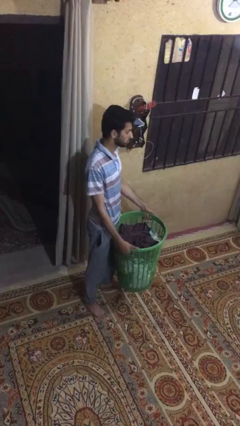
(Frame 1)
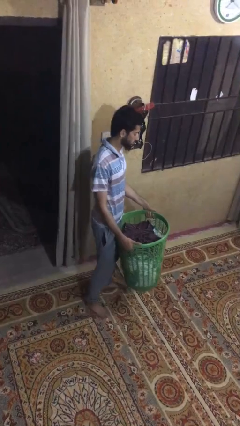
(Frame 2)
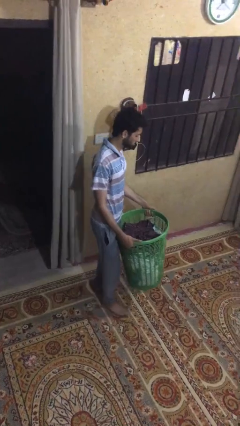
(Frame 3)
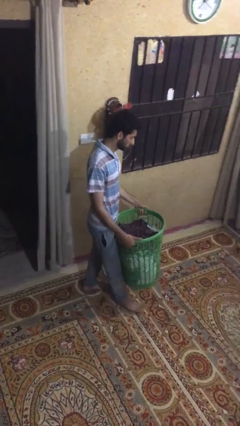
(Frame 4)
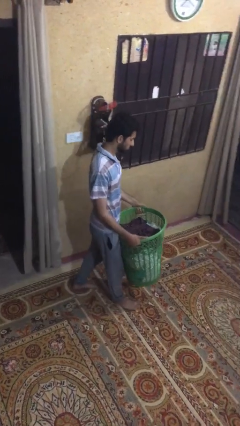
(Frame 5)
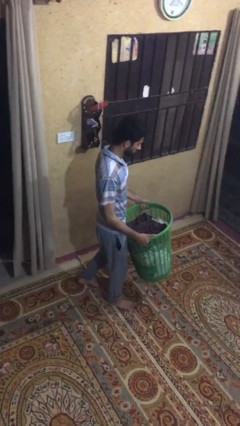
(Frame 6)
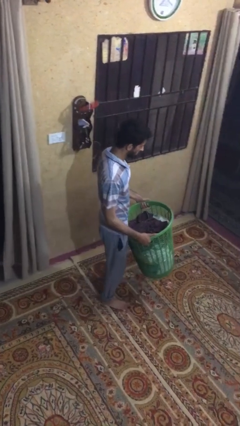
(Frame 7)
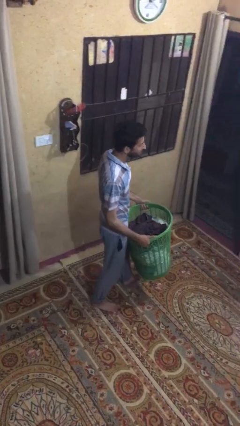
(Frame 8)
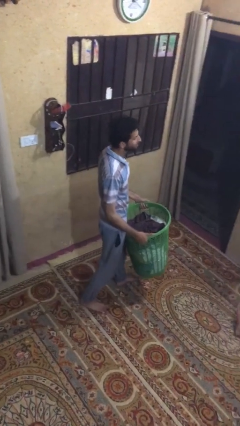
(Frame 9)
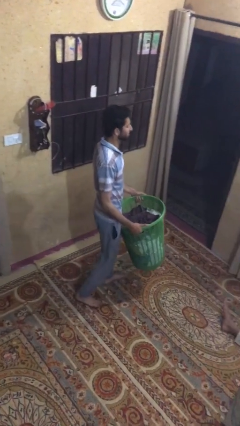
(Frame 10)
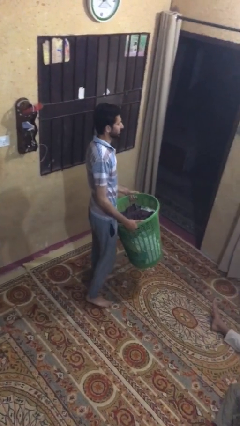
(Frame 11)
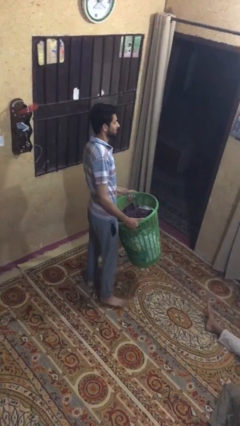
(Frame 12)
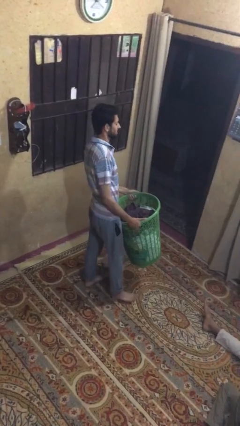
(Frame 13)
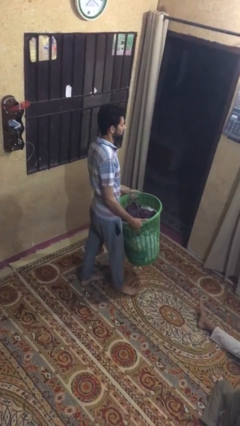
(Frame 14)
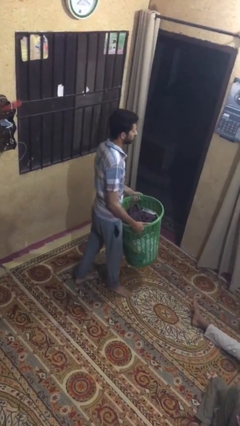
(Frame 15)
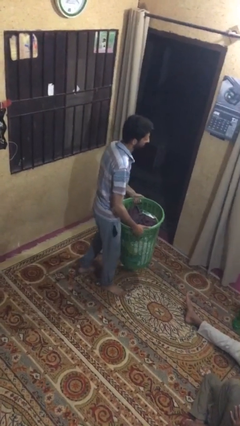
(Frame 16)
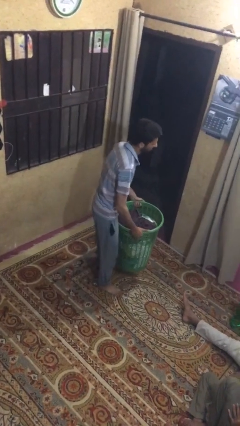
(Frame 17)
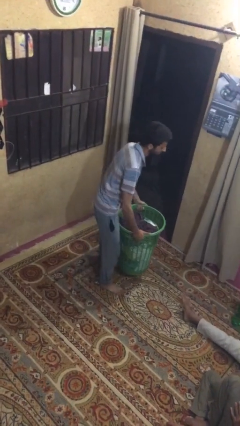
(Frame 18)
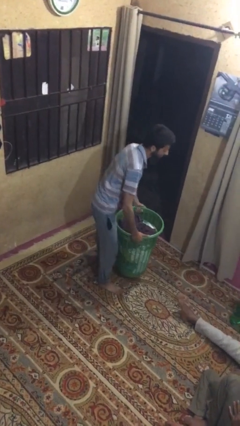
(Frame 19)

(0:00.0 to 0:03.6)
person carries heavy object

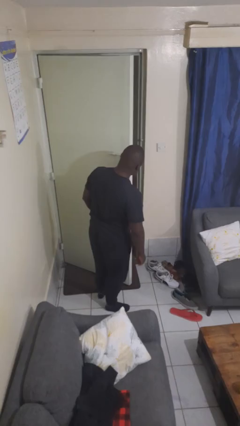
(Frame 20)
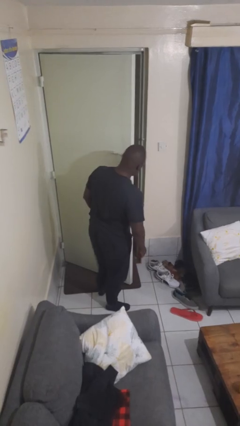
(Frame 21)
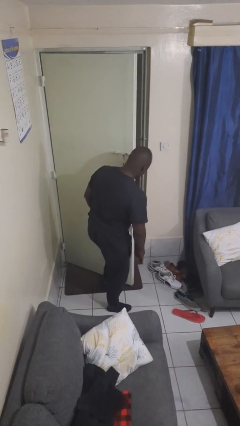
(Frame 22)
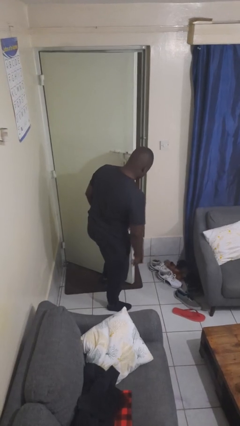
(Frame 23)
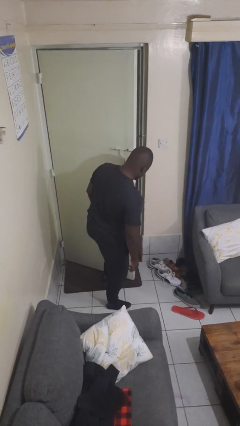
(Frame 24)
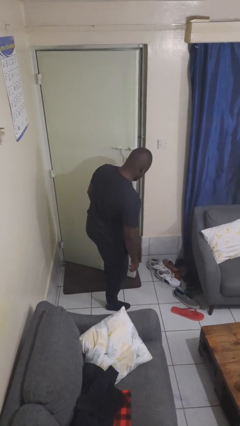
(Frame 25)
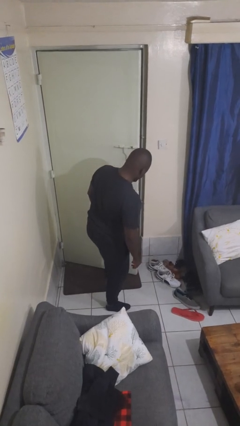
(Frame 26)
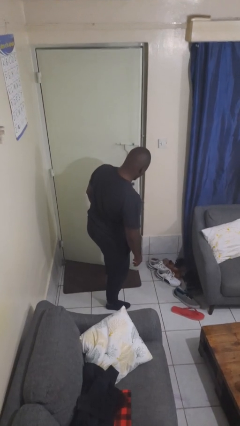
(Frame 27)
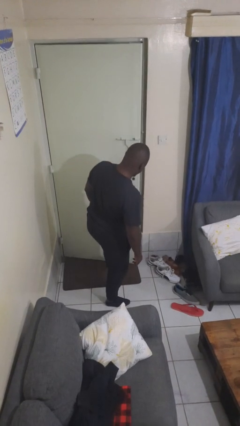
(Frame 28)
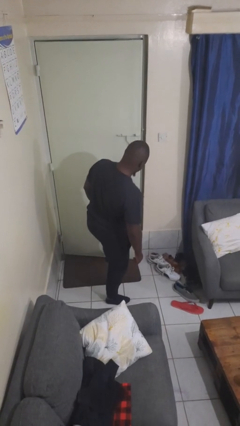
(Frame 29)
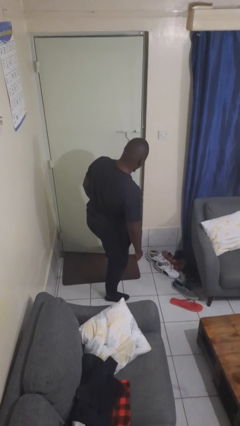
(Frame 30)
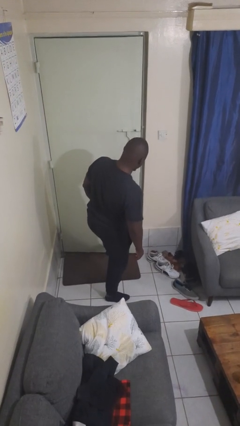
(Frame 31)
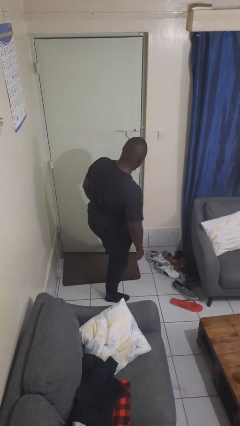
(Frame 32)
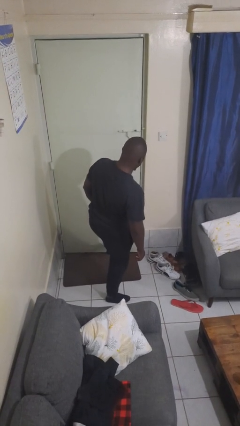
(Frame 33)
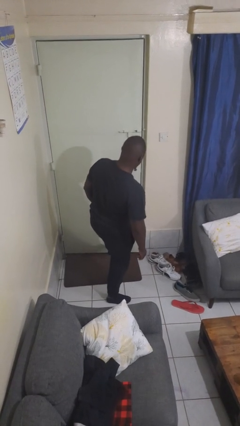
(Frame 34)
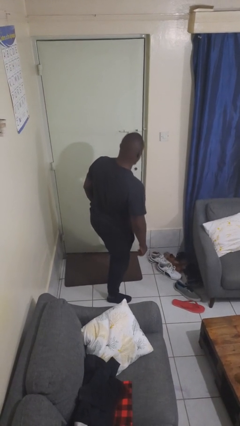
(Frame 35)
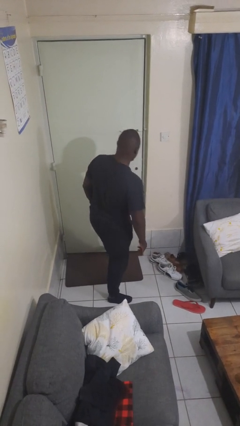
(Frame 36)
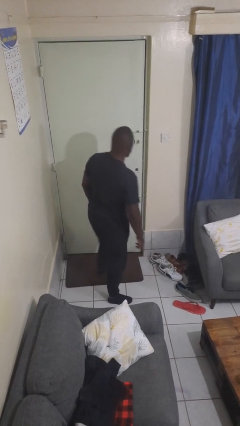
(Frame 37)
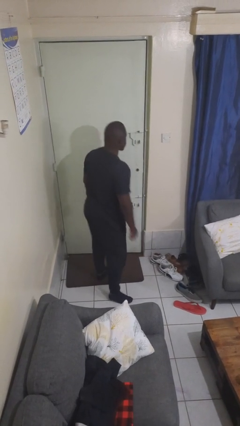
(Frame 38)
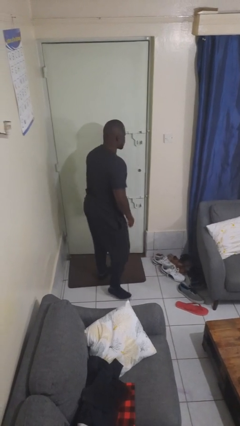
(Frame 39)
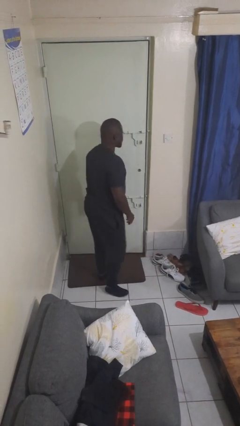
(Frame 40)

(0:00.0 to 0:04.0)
person closes door with foot

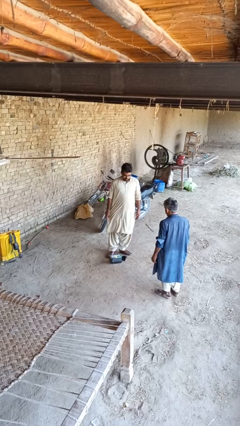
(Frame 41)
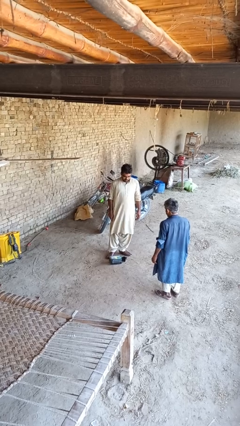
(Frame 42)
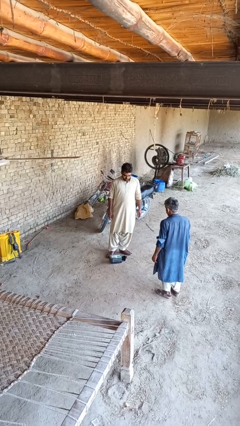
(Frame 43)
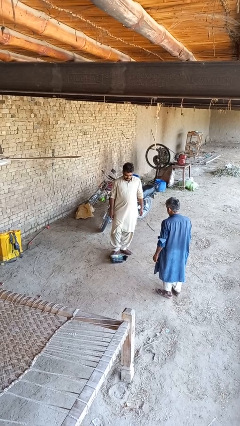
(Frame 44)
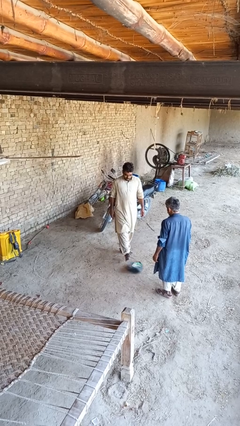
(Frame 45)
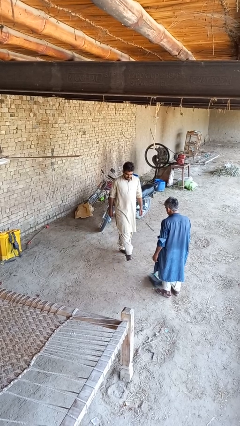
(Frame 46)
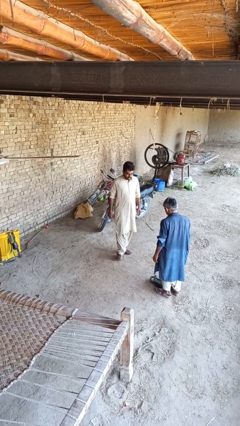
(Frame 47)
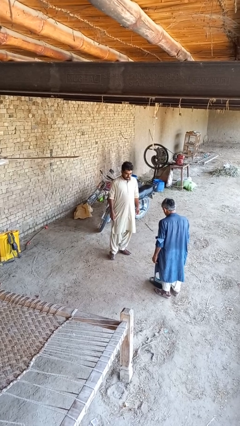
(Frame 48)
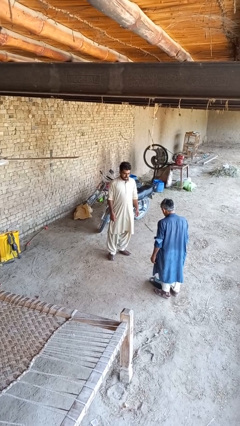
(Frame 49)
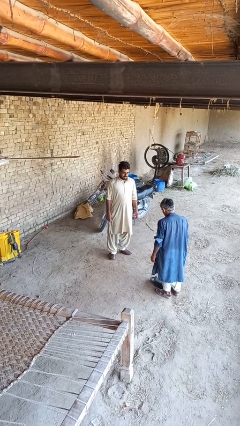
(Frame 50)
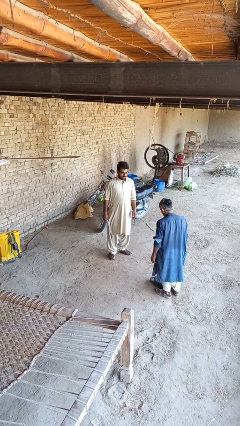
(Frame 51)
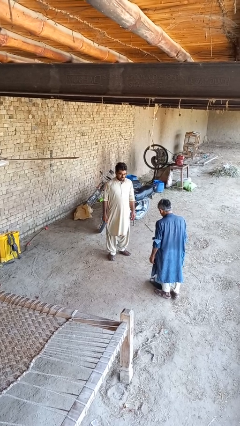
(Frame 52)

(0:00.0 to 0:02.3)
person kicks object to person

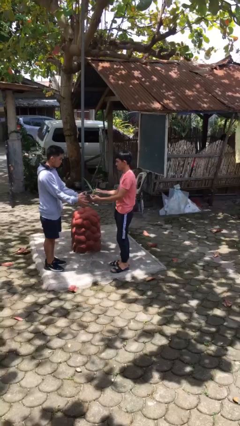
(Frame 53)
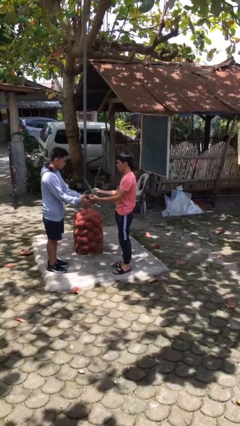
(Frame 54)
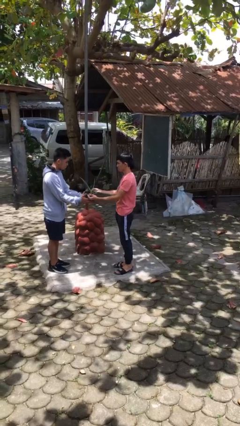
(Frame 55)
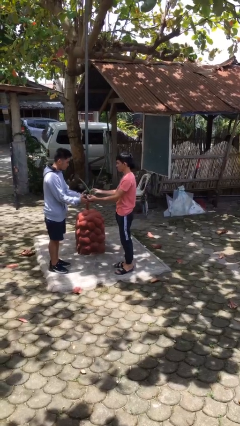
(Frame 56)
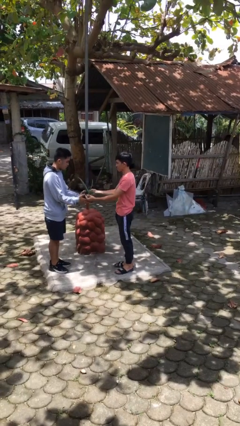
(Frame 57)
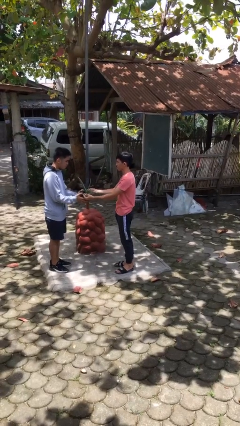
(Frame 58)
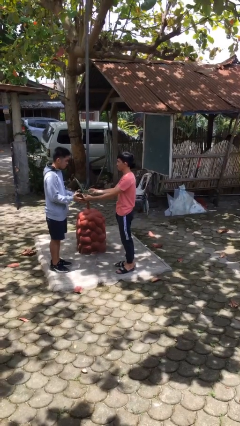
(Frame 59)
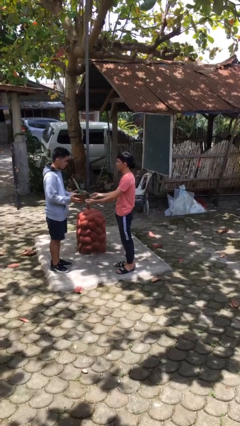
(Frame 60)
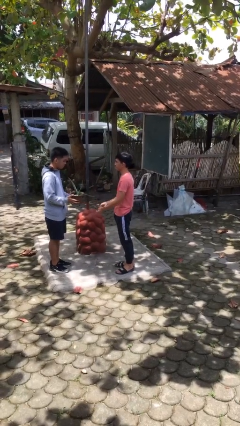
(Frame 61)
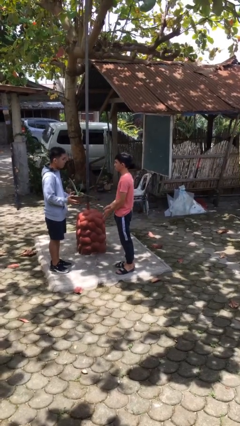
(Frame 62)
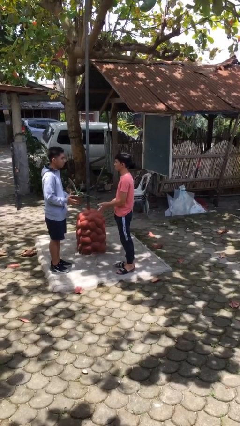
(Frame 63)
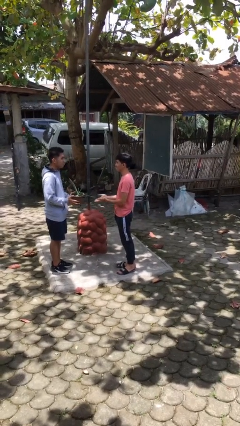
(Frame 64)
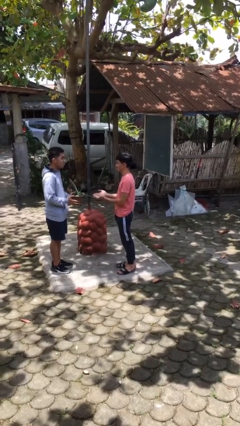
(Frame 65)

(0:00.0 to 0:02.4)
person transfers object to person

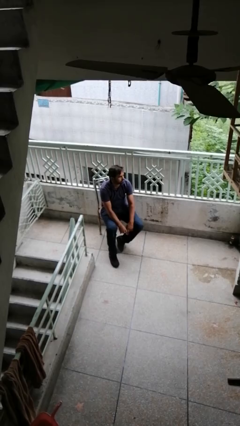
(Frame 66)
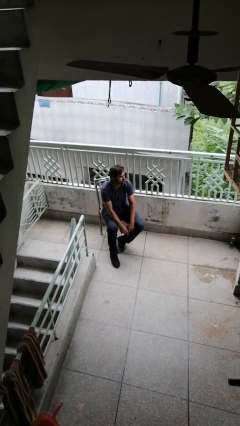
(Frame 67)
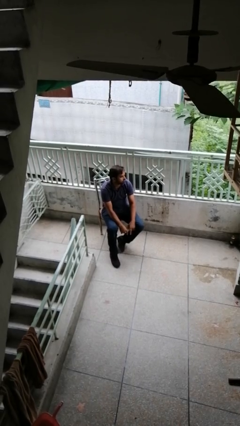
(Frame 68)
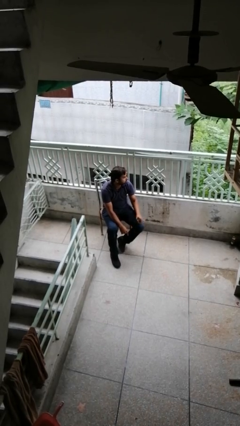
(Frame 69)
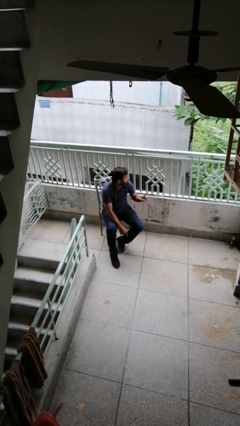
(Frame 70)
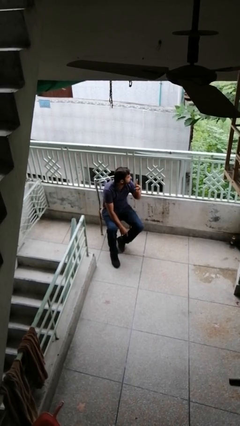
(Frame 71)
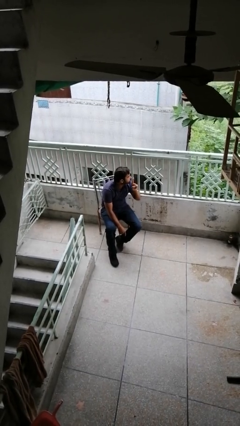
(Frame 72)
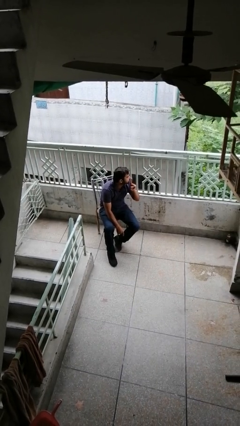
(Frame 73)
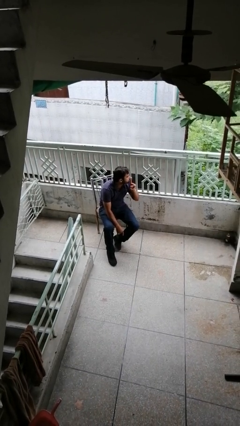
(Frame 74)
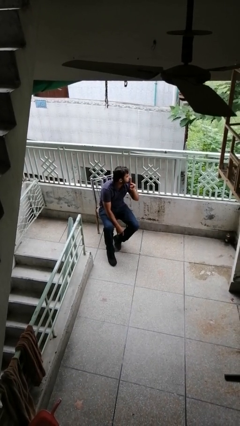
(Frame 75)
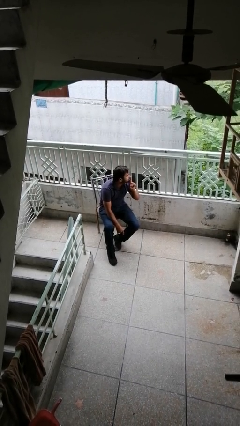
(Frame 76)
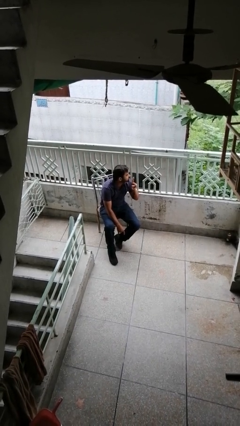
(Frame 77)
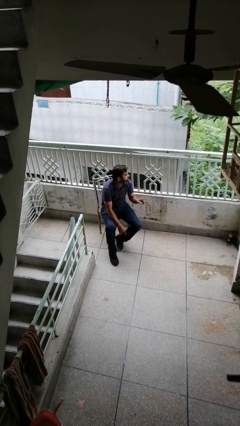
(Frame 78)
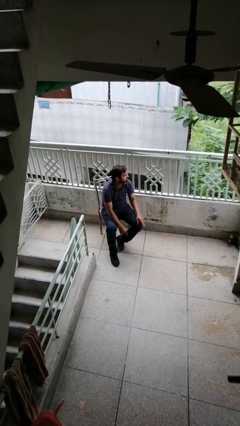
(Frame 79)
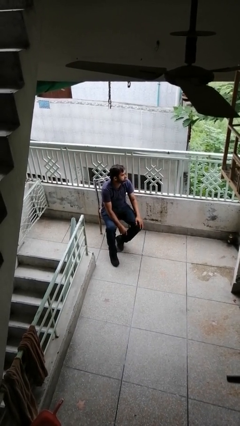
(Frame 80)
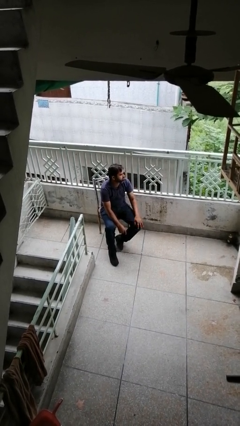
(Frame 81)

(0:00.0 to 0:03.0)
person gestures be quiet

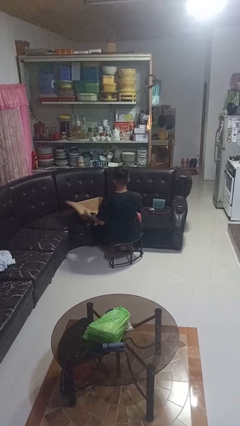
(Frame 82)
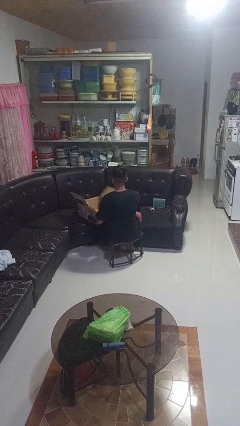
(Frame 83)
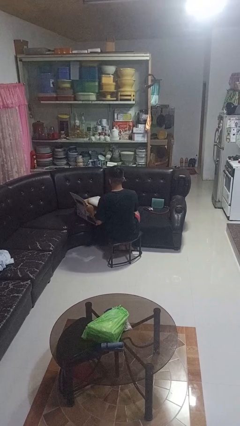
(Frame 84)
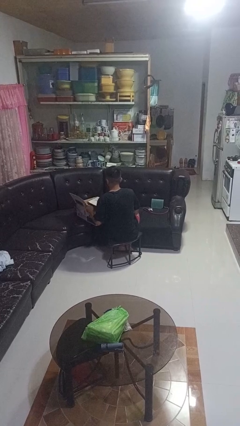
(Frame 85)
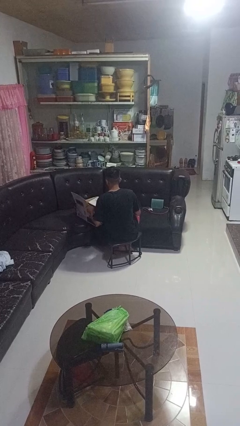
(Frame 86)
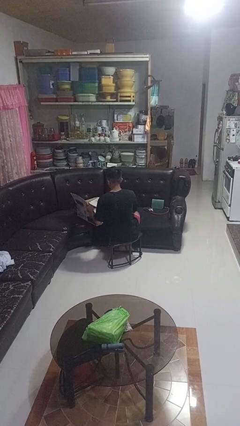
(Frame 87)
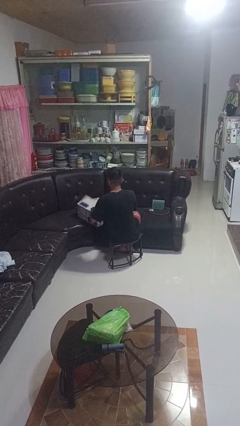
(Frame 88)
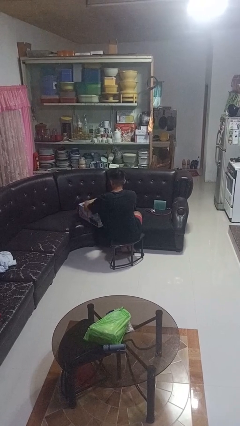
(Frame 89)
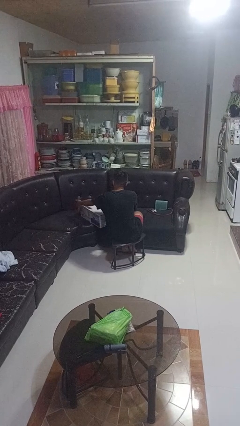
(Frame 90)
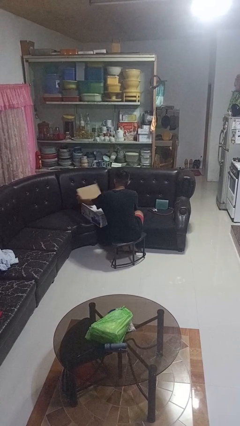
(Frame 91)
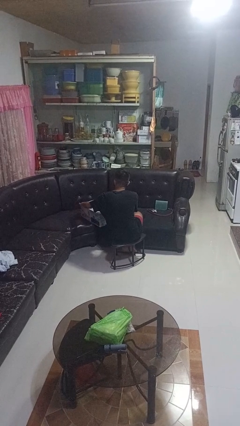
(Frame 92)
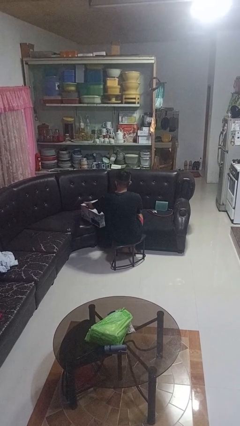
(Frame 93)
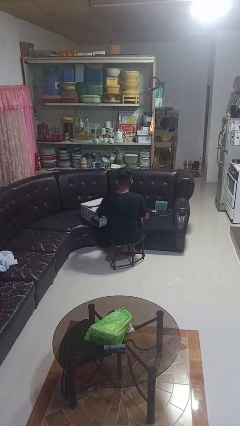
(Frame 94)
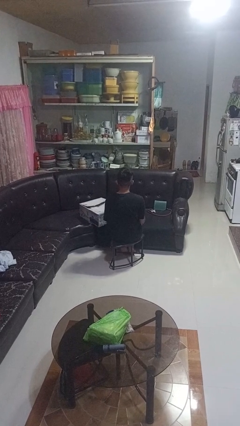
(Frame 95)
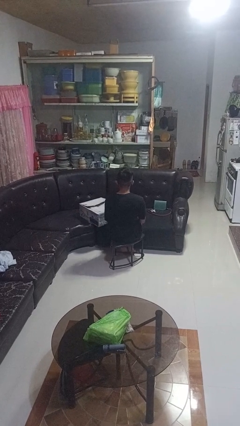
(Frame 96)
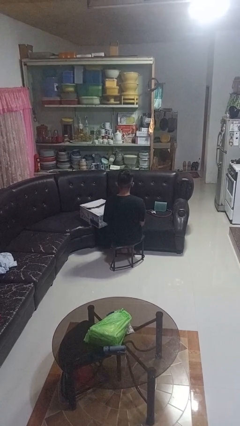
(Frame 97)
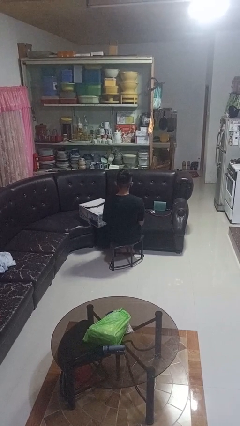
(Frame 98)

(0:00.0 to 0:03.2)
person closes box
